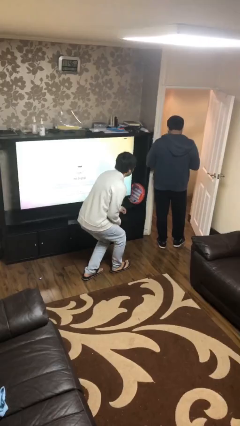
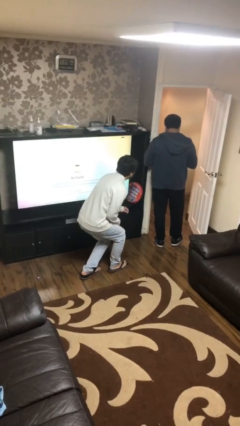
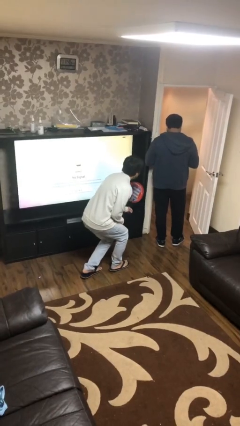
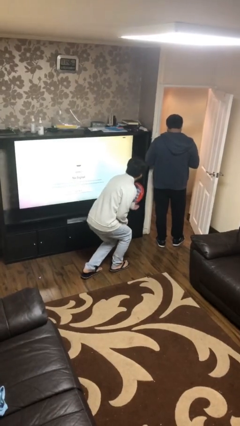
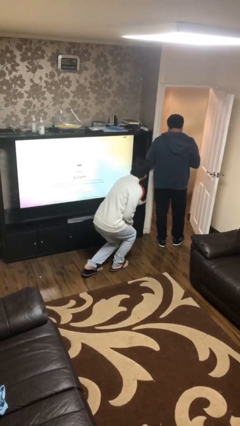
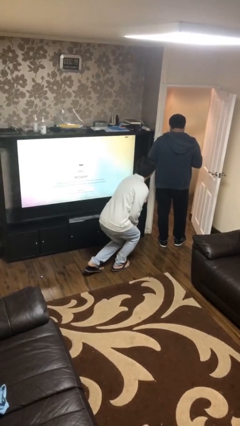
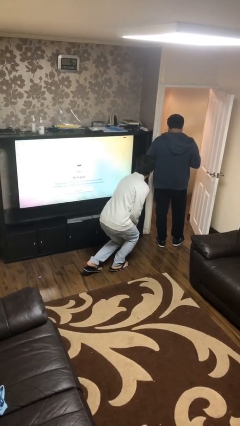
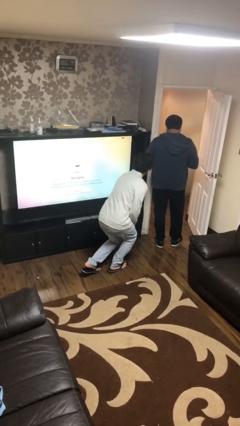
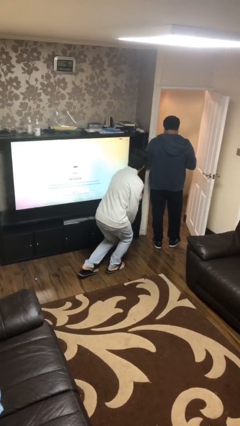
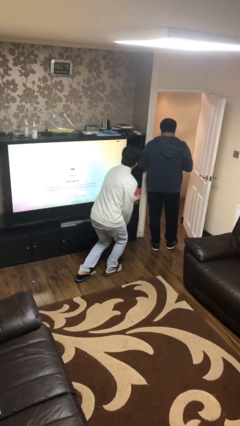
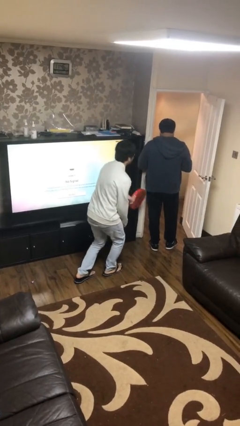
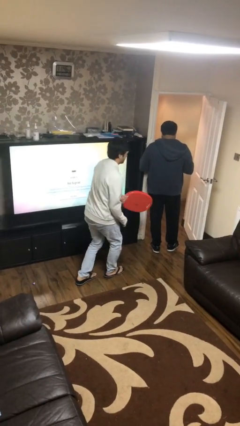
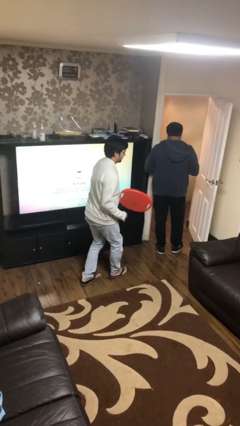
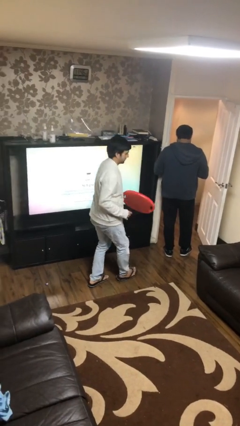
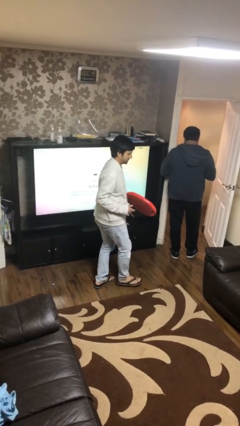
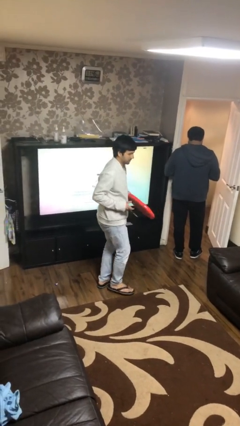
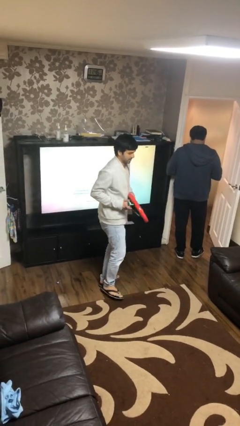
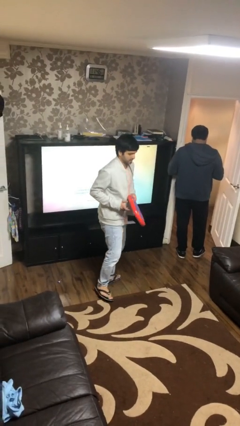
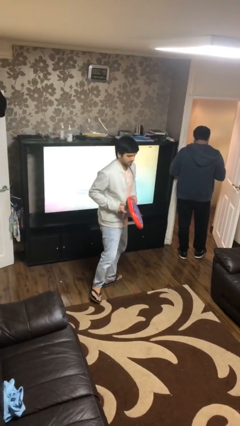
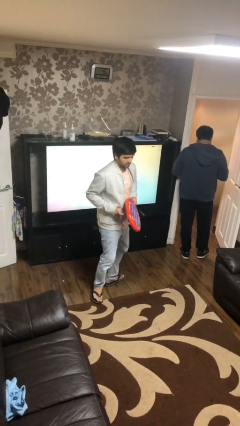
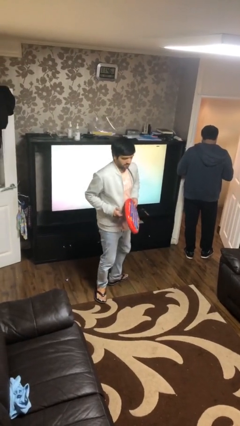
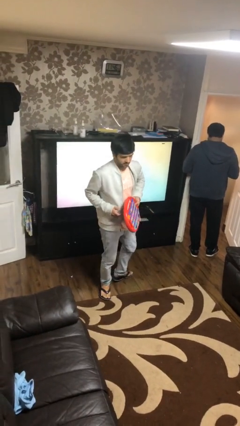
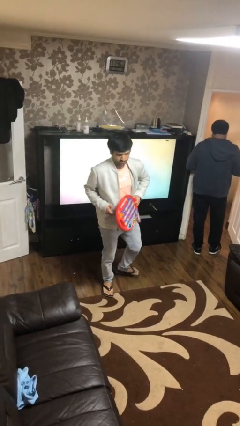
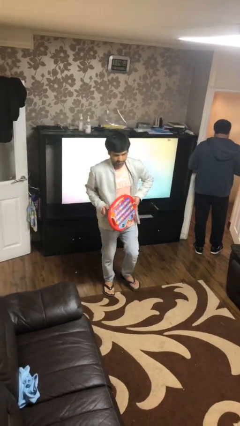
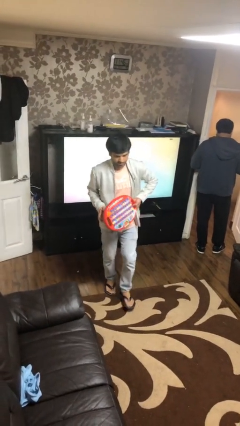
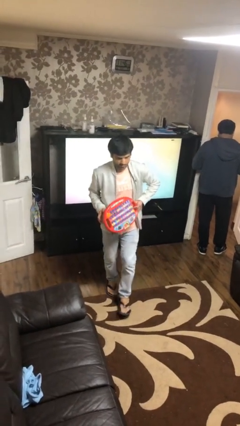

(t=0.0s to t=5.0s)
person steals object from person

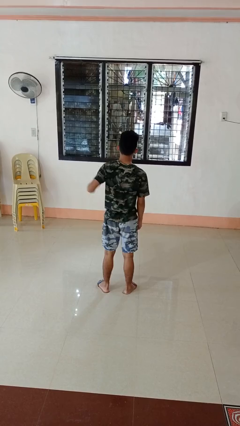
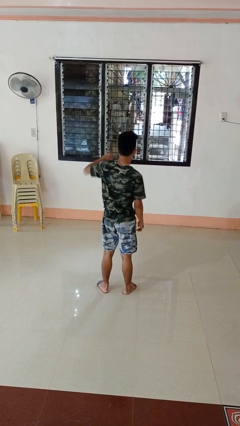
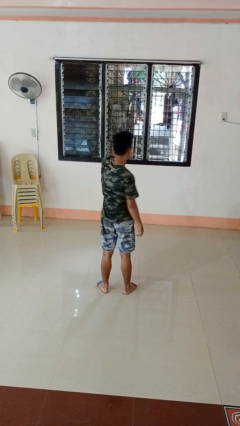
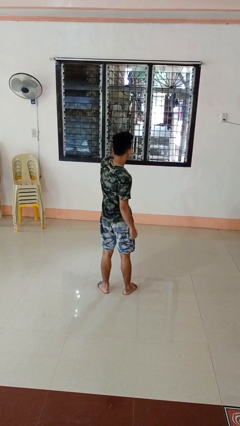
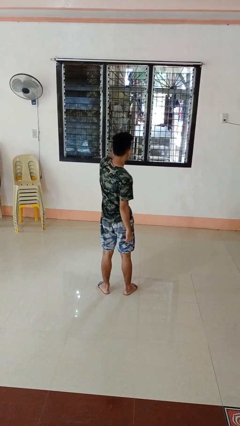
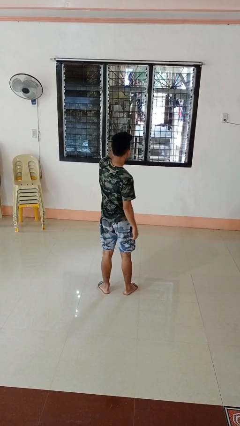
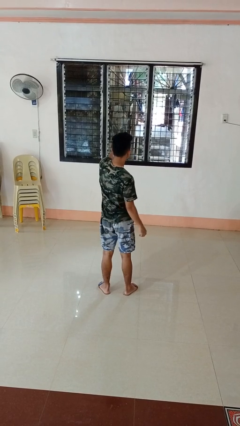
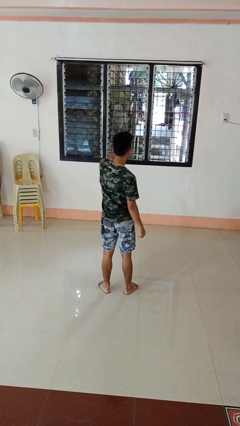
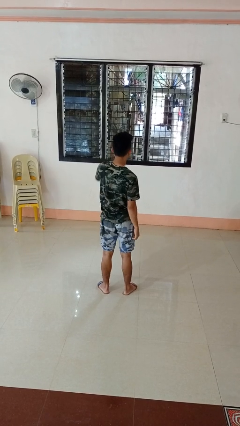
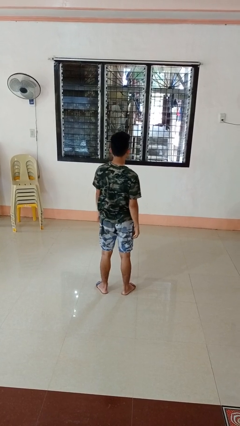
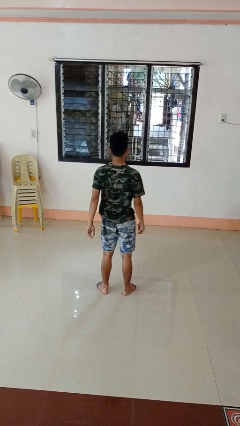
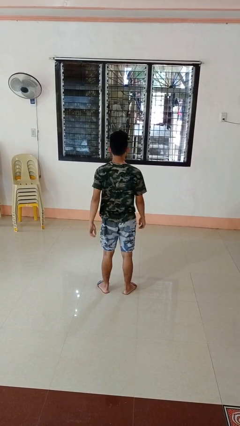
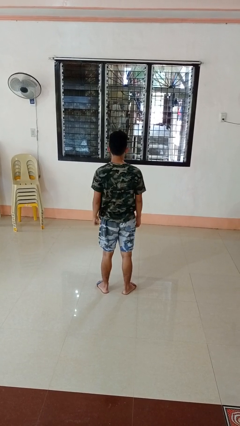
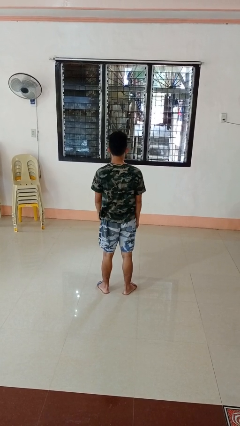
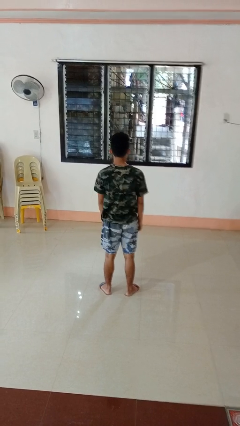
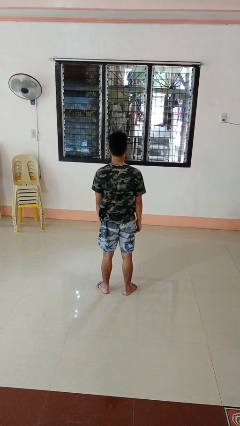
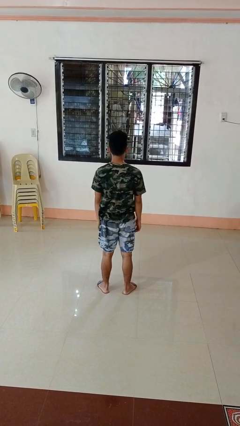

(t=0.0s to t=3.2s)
person punches

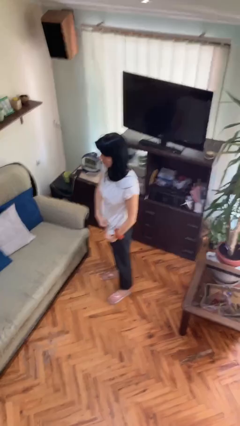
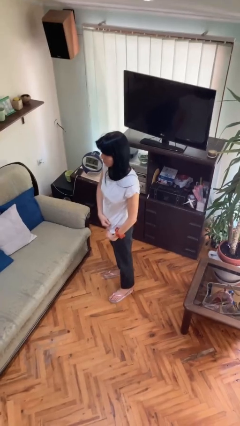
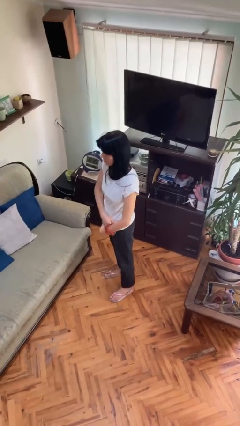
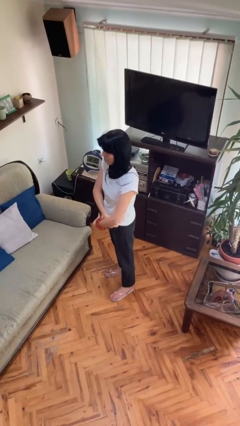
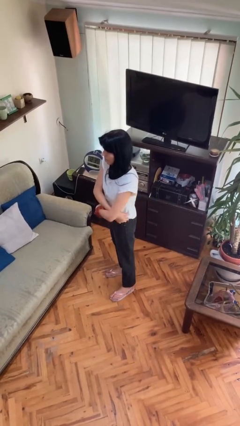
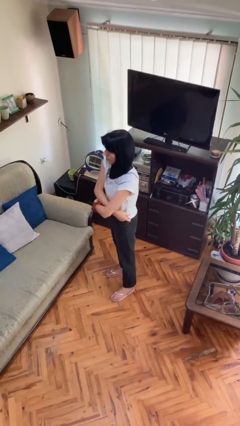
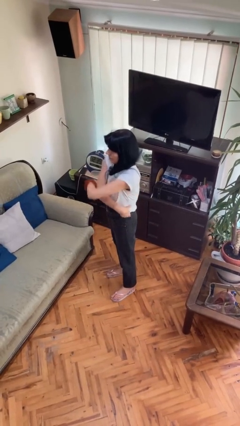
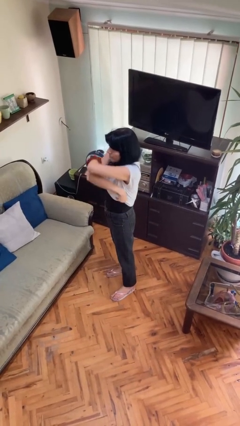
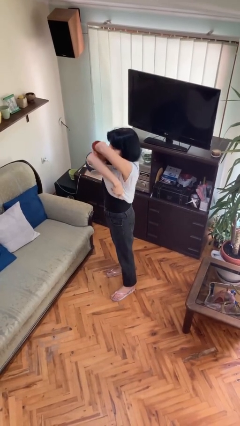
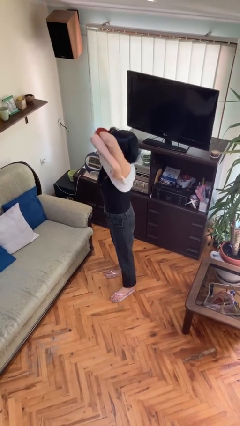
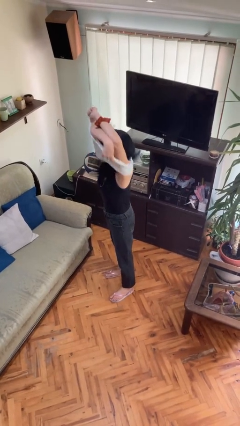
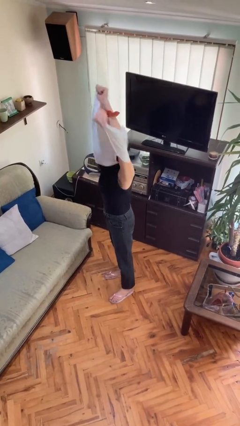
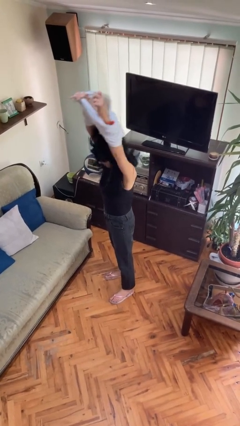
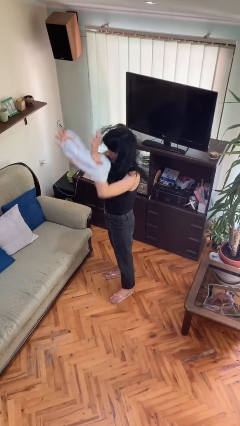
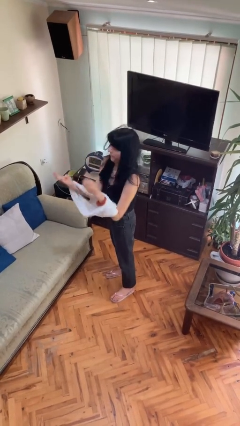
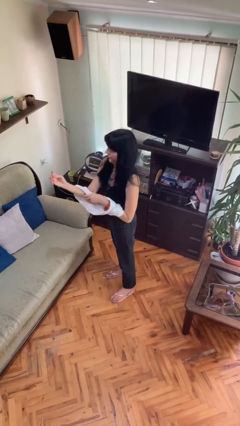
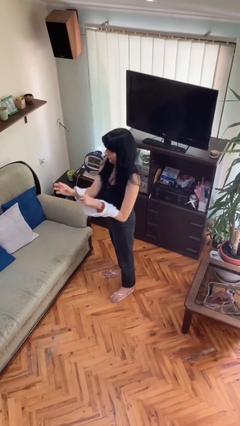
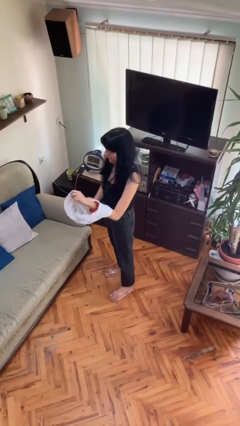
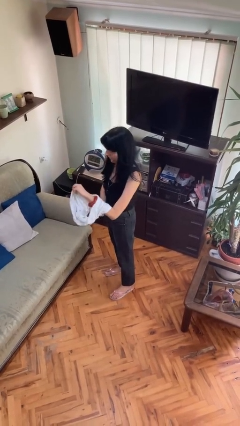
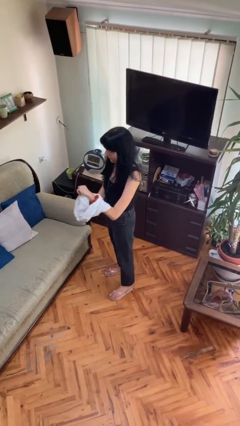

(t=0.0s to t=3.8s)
person takes off shirt

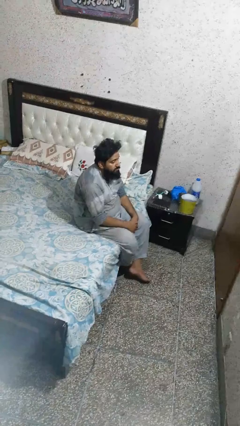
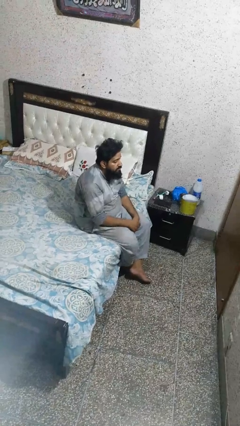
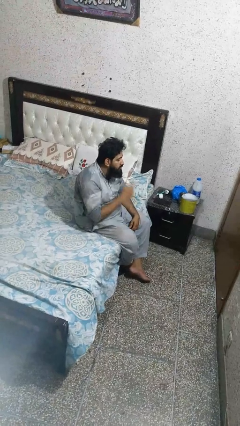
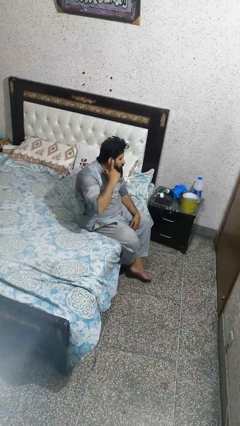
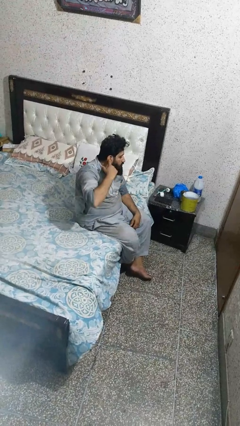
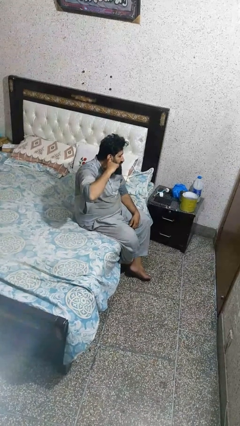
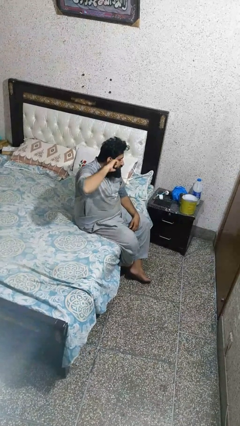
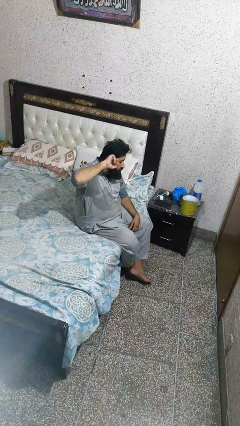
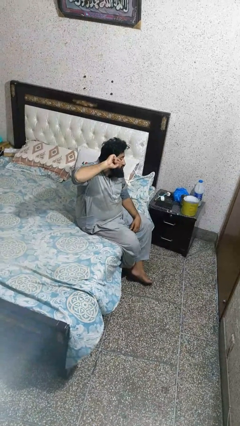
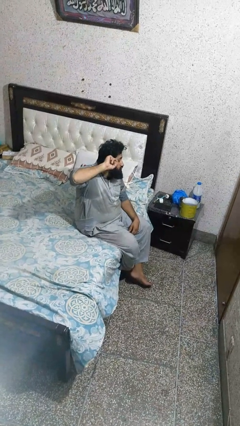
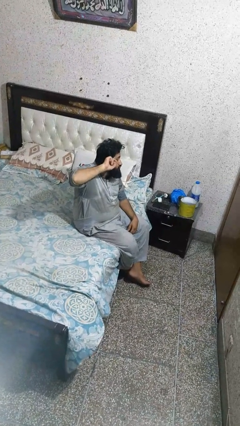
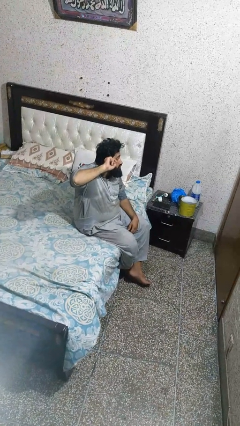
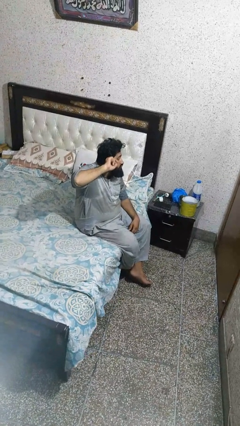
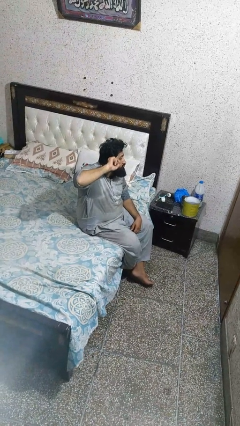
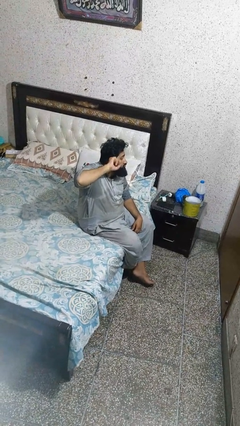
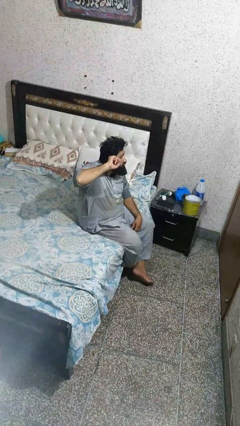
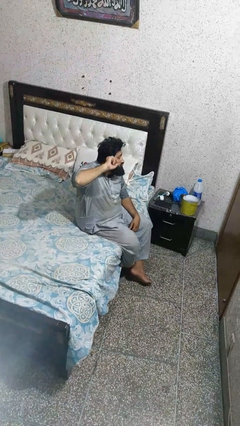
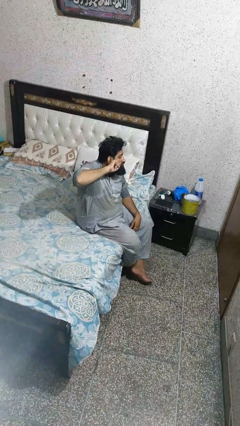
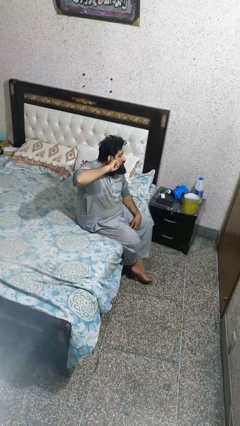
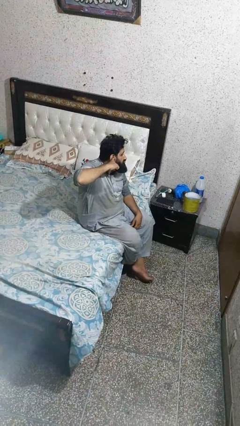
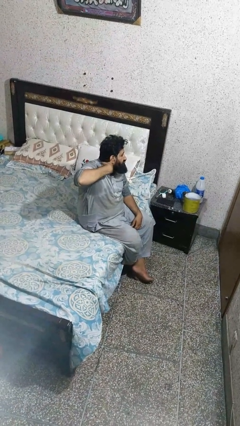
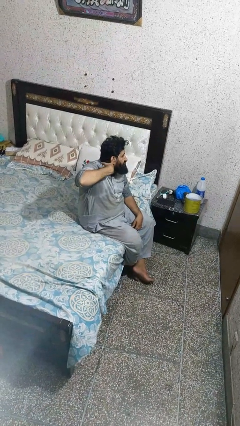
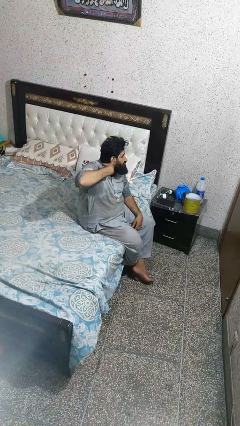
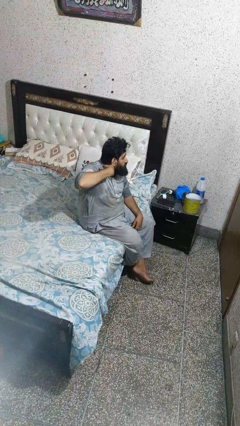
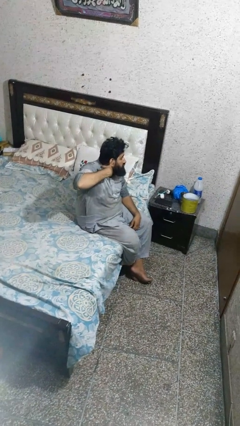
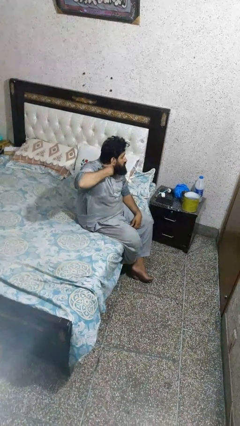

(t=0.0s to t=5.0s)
person puts fingers in ear

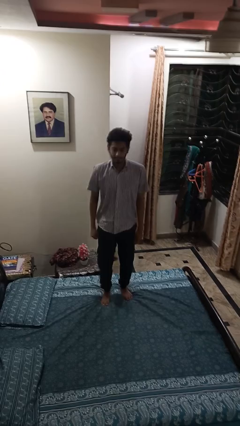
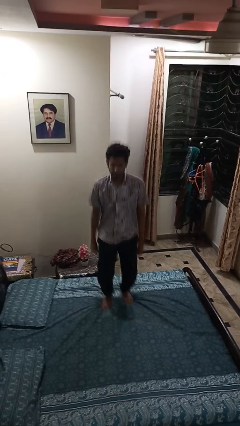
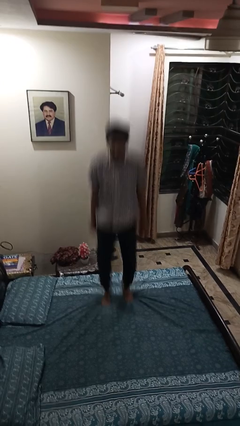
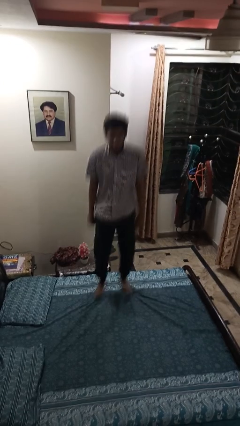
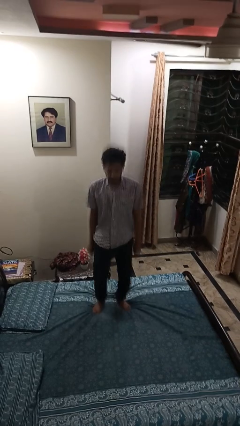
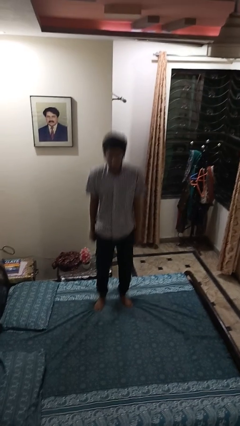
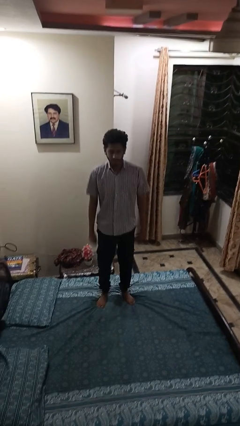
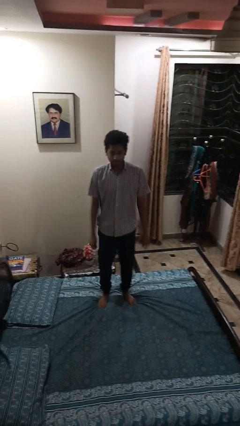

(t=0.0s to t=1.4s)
person jumps on bed
